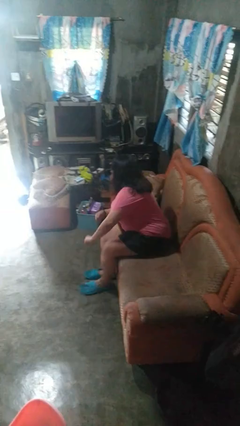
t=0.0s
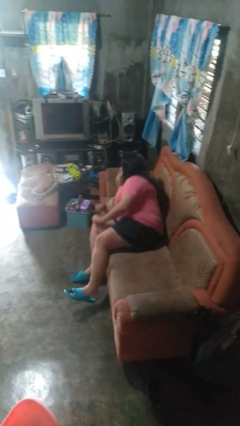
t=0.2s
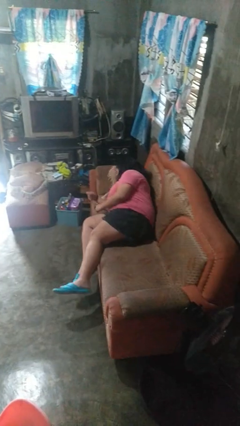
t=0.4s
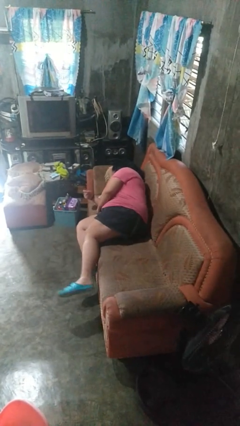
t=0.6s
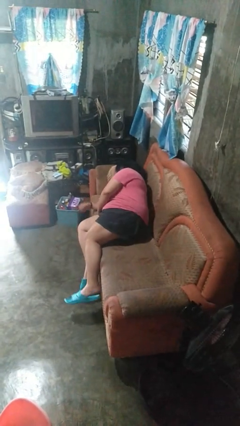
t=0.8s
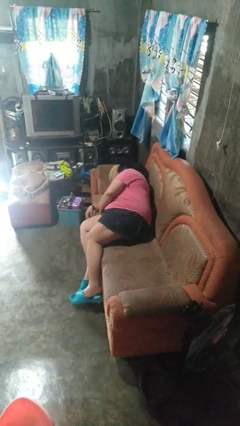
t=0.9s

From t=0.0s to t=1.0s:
person lies down on couch

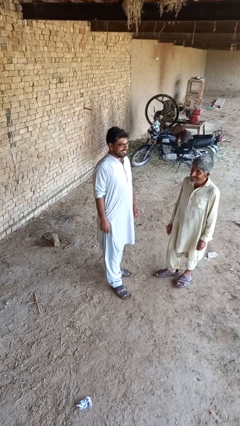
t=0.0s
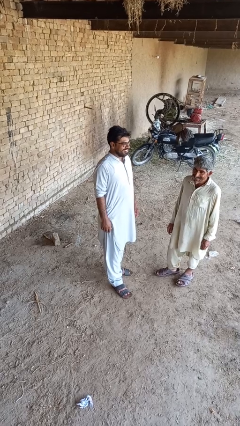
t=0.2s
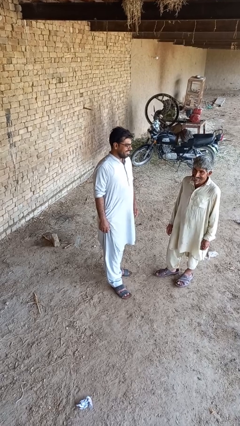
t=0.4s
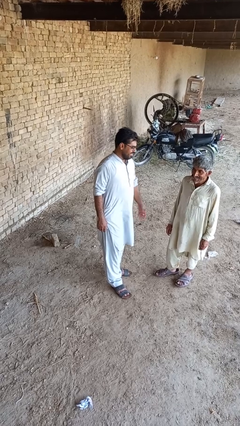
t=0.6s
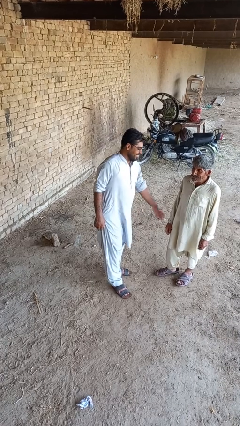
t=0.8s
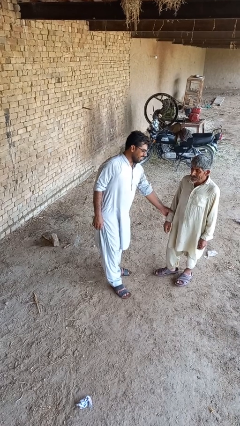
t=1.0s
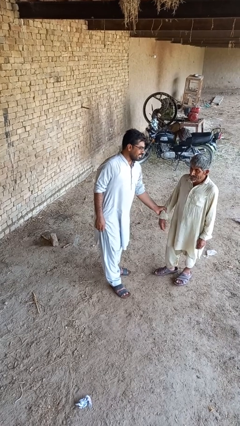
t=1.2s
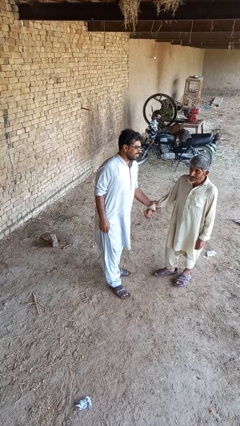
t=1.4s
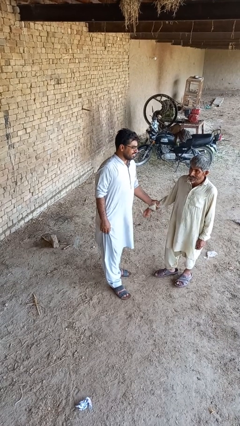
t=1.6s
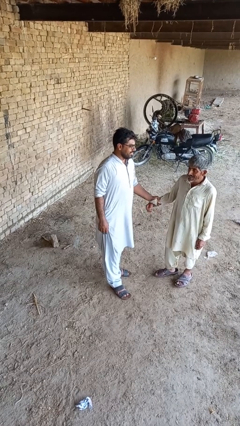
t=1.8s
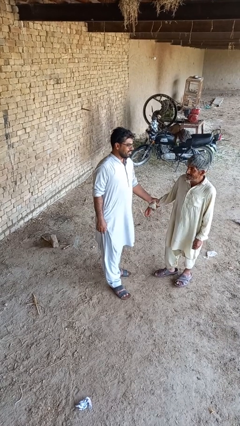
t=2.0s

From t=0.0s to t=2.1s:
person grabs person by forearm

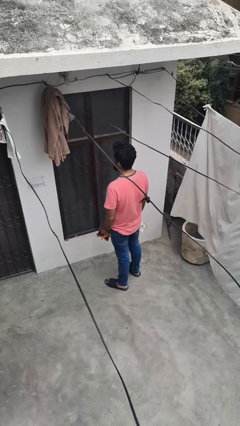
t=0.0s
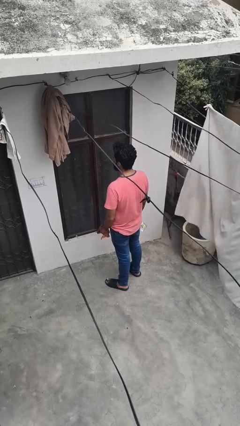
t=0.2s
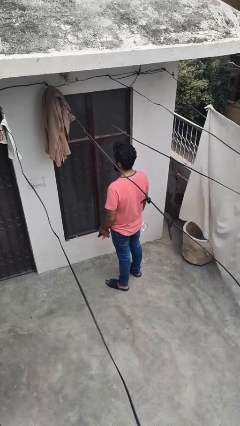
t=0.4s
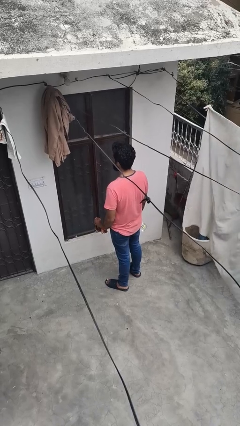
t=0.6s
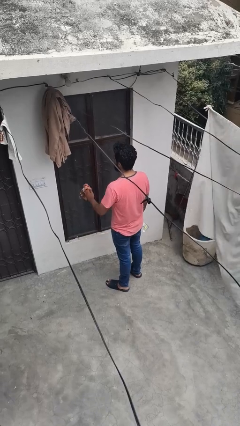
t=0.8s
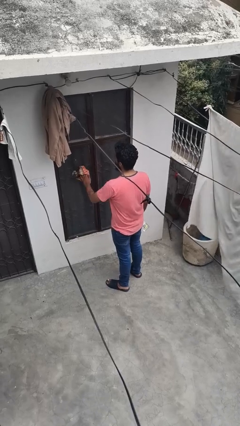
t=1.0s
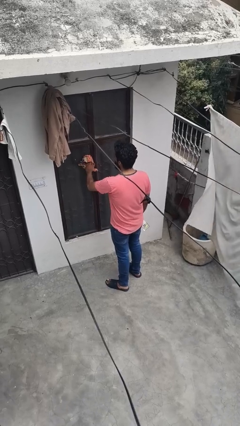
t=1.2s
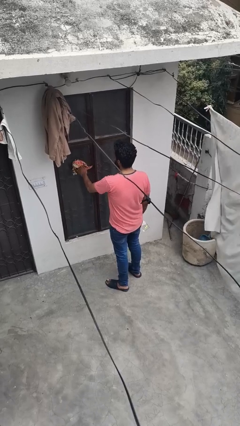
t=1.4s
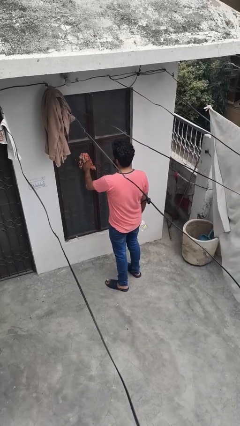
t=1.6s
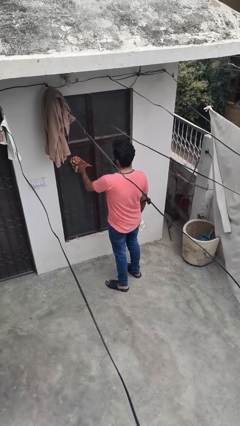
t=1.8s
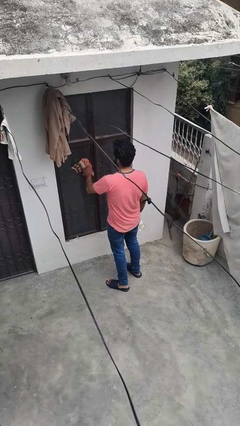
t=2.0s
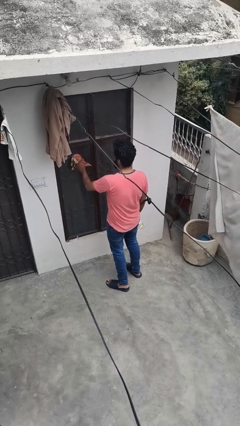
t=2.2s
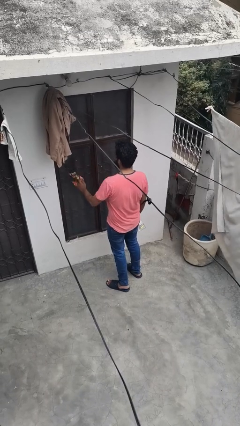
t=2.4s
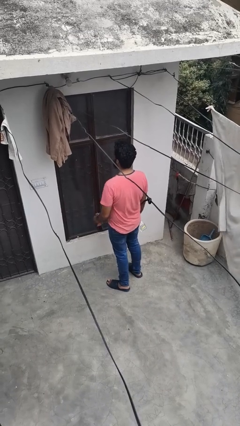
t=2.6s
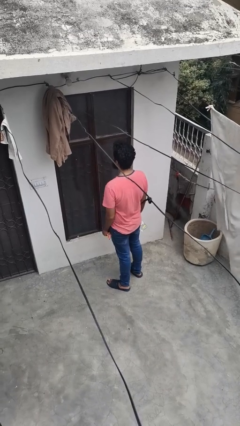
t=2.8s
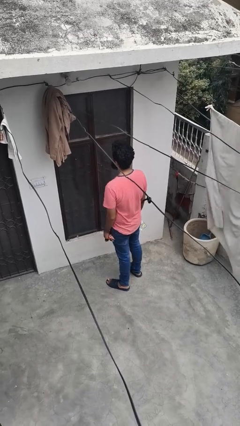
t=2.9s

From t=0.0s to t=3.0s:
person washes window

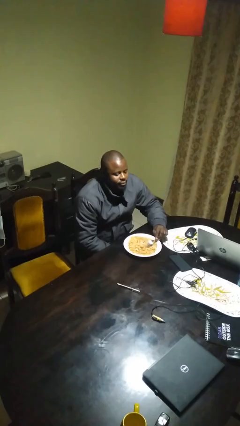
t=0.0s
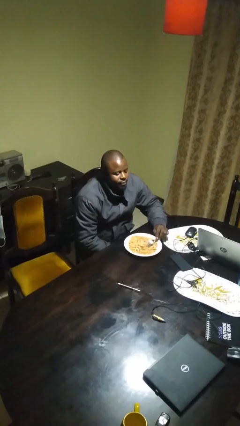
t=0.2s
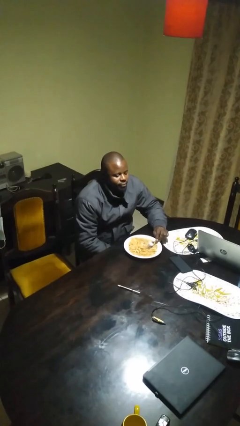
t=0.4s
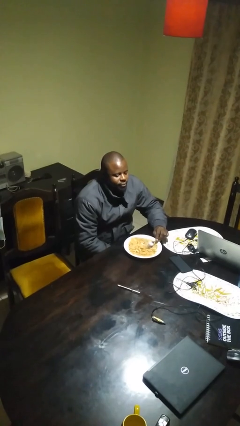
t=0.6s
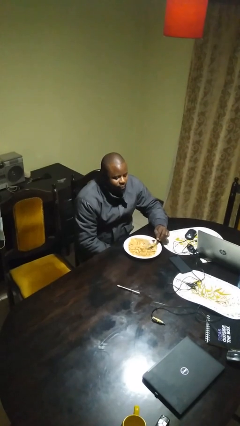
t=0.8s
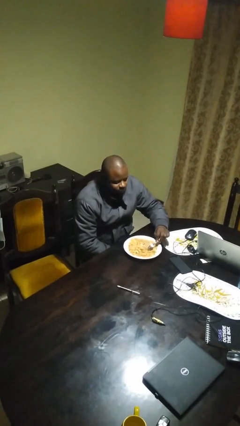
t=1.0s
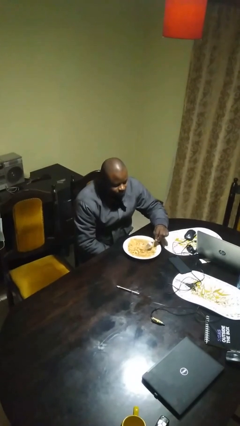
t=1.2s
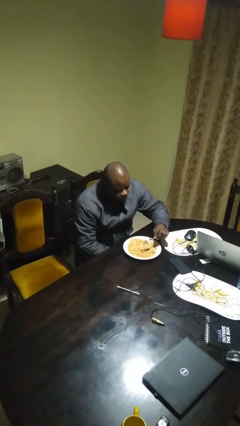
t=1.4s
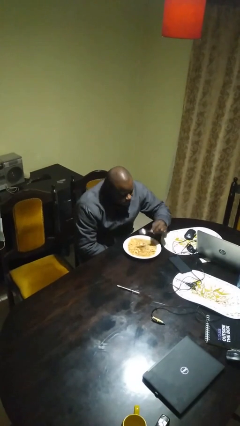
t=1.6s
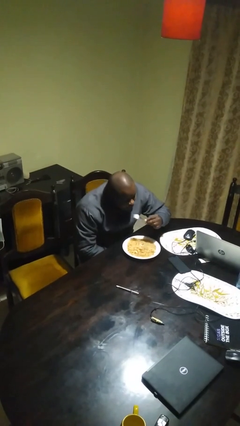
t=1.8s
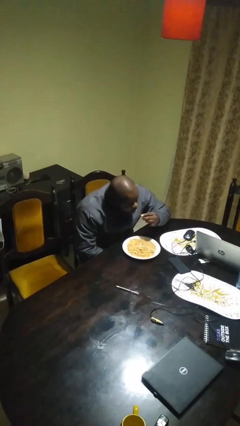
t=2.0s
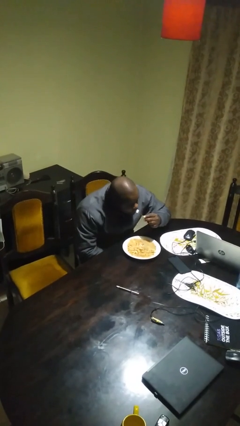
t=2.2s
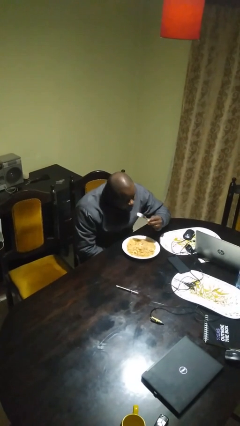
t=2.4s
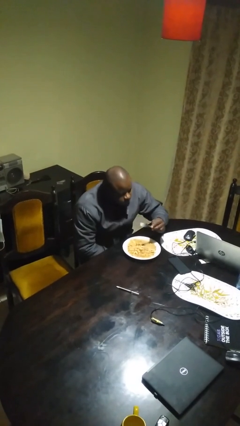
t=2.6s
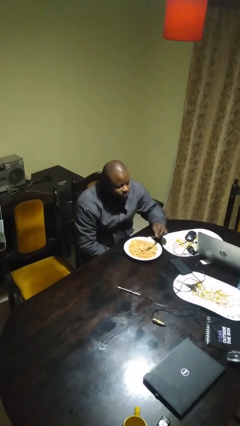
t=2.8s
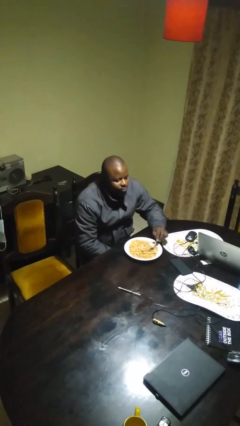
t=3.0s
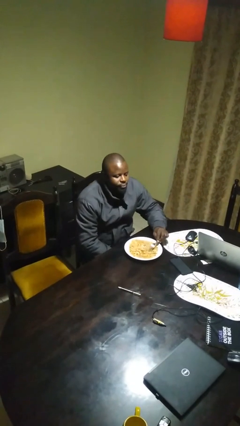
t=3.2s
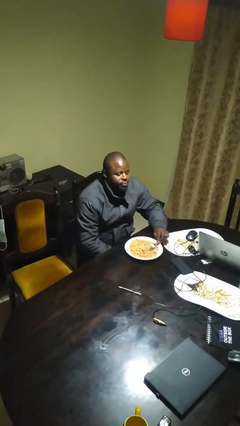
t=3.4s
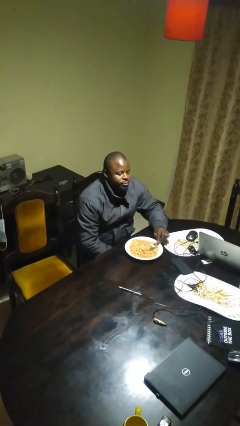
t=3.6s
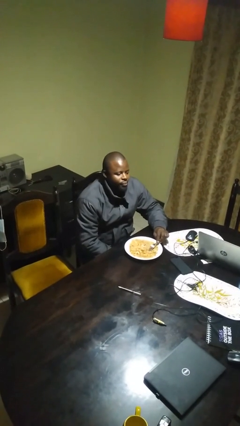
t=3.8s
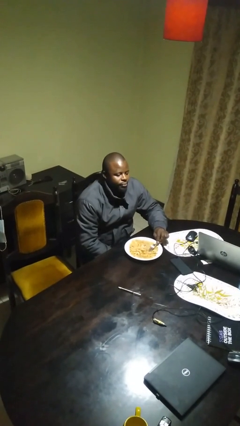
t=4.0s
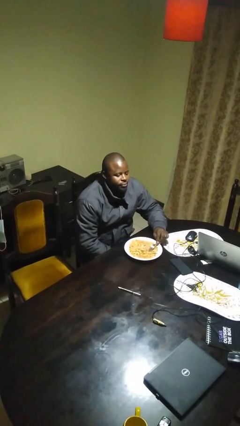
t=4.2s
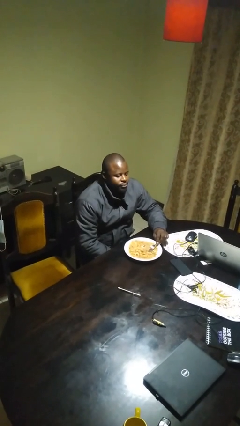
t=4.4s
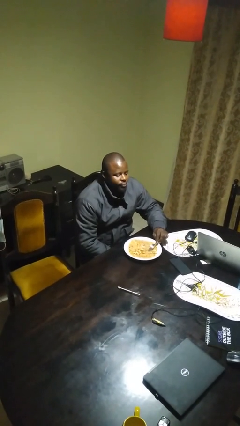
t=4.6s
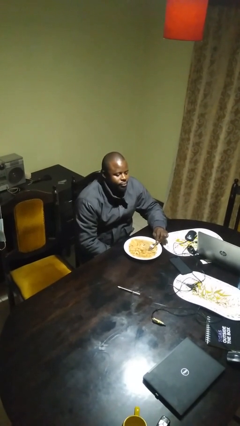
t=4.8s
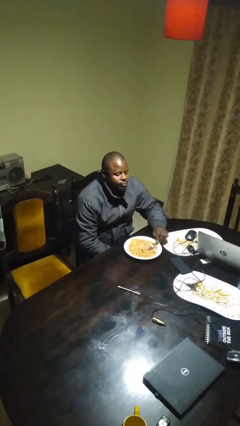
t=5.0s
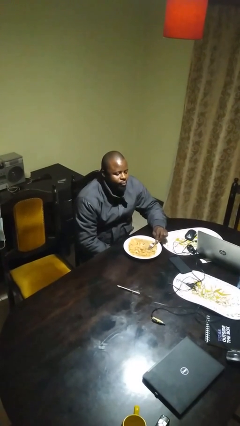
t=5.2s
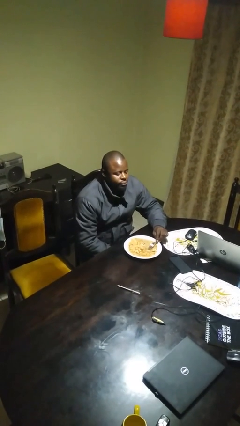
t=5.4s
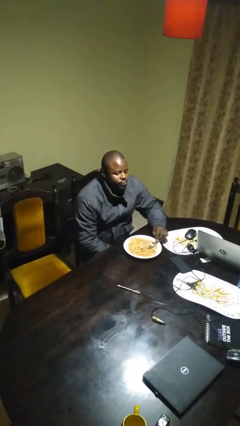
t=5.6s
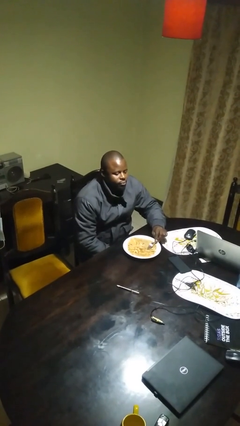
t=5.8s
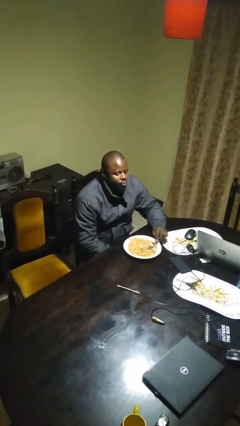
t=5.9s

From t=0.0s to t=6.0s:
person eats with utensil

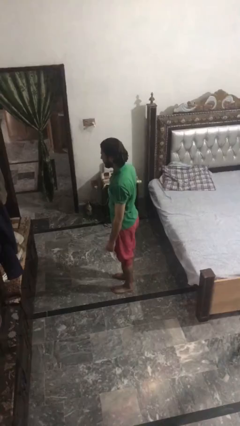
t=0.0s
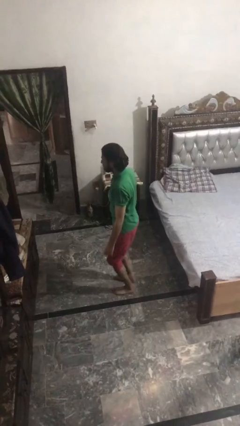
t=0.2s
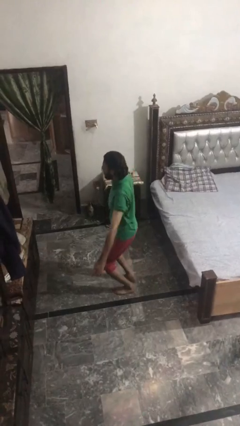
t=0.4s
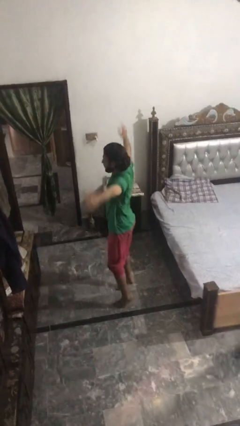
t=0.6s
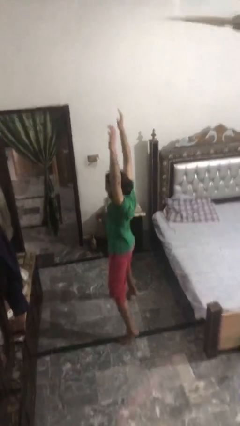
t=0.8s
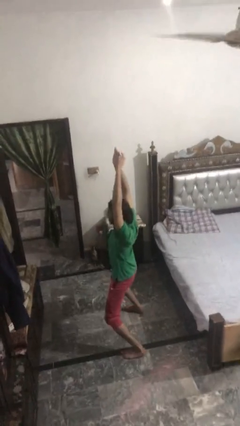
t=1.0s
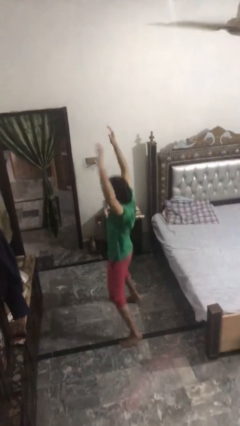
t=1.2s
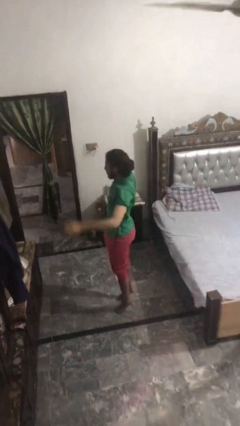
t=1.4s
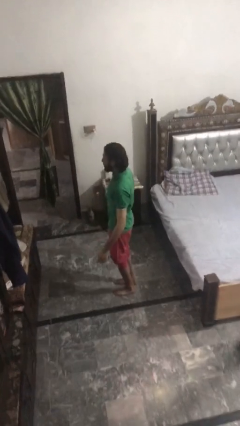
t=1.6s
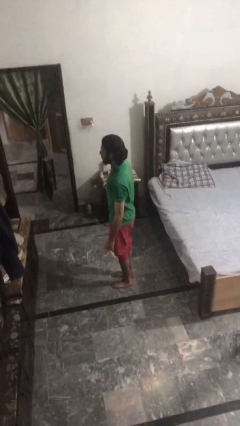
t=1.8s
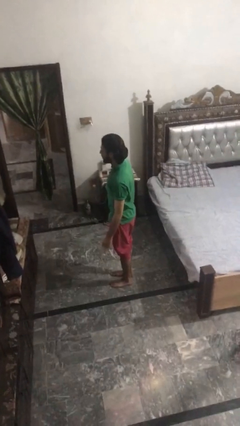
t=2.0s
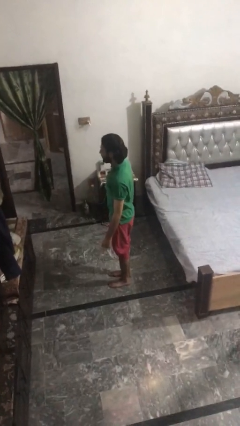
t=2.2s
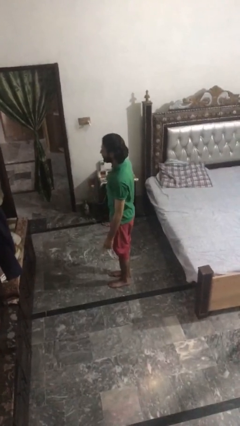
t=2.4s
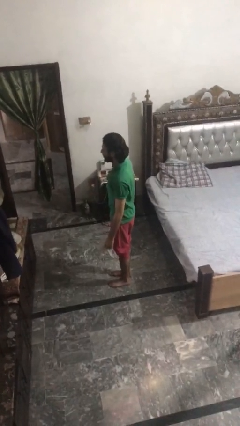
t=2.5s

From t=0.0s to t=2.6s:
person exercises with jumping jacks

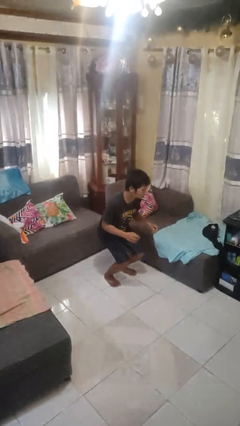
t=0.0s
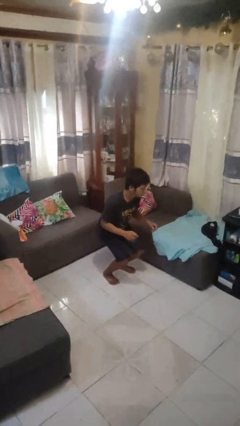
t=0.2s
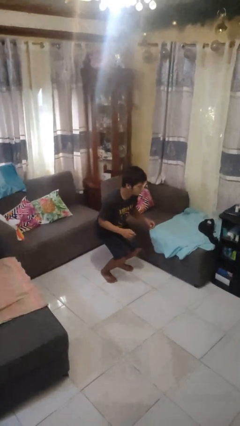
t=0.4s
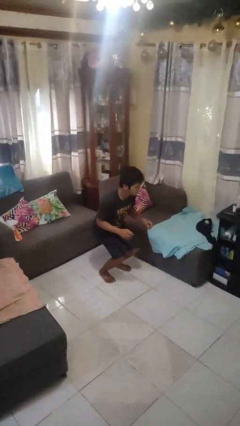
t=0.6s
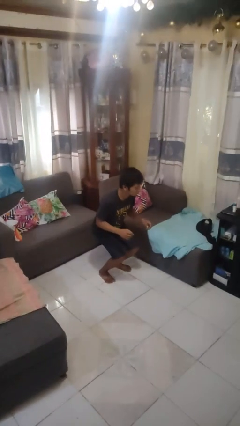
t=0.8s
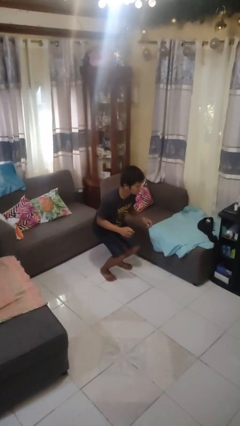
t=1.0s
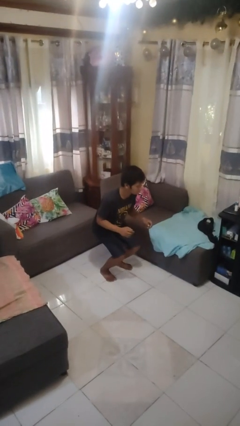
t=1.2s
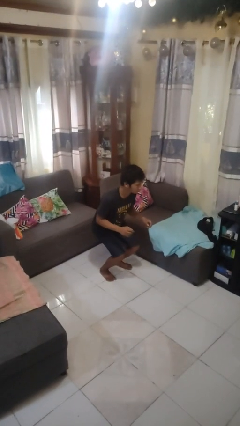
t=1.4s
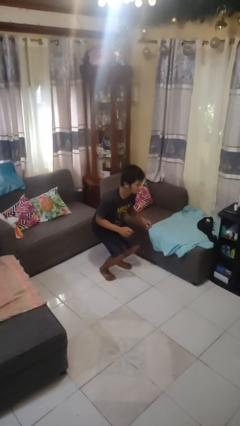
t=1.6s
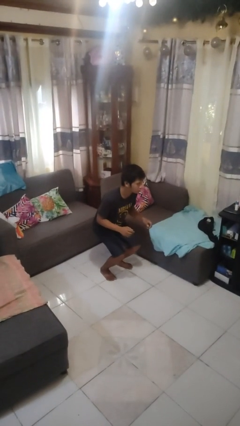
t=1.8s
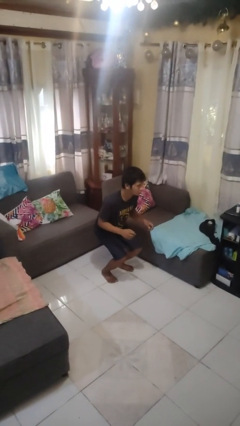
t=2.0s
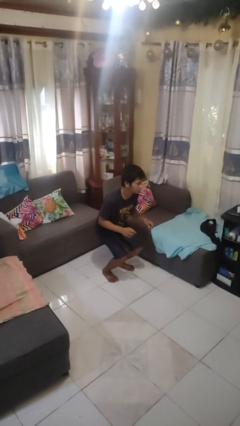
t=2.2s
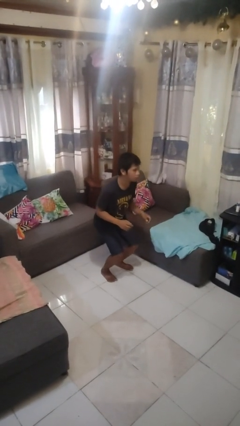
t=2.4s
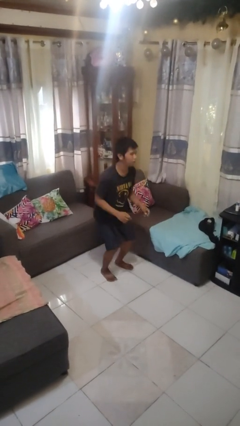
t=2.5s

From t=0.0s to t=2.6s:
person squats

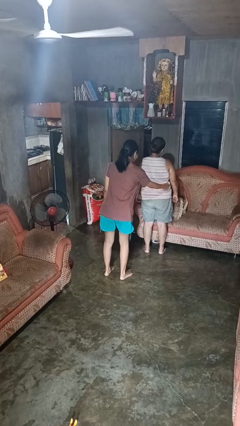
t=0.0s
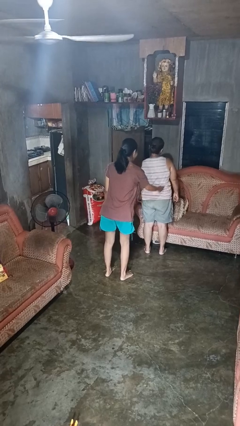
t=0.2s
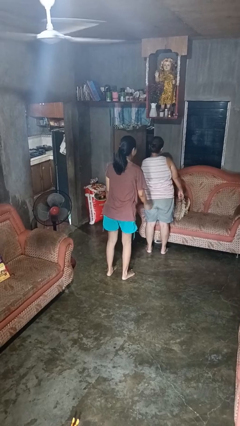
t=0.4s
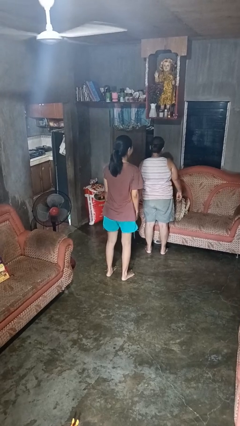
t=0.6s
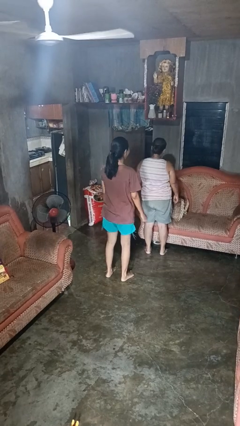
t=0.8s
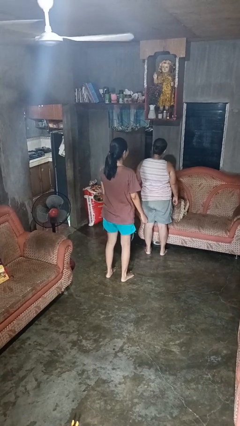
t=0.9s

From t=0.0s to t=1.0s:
person tickles person
